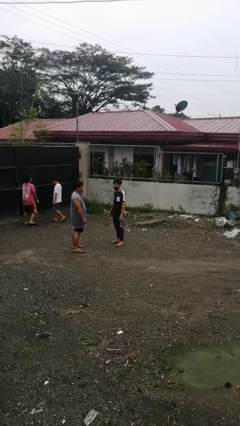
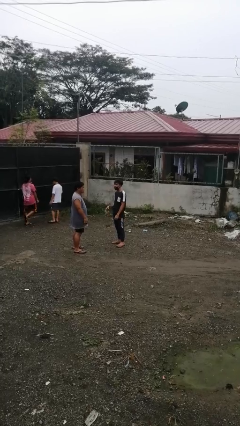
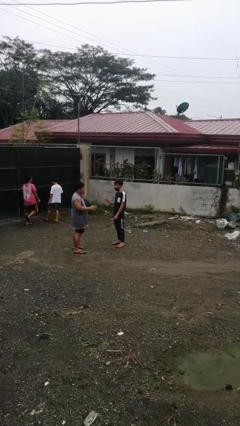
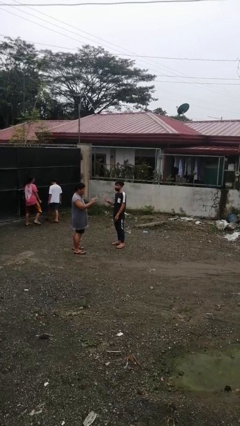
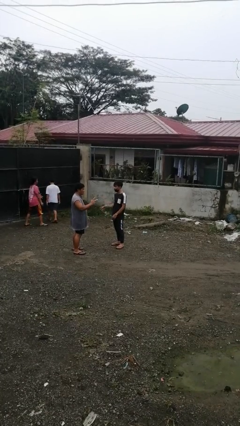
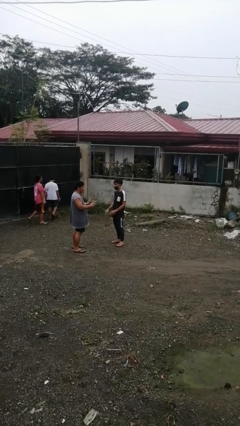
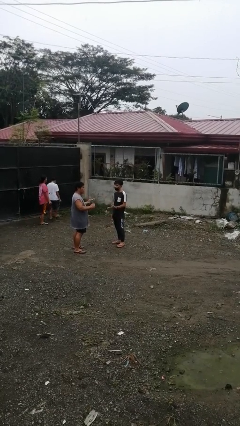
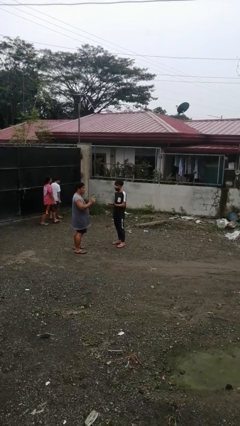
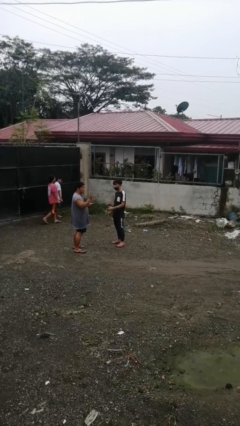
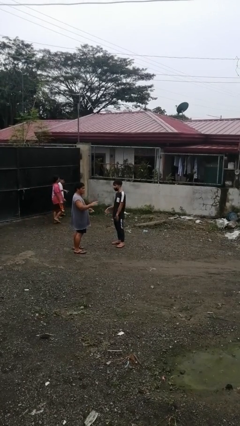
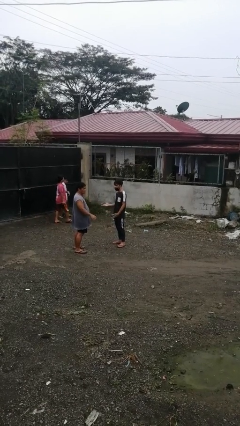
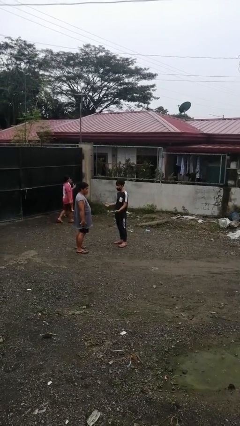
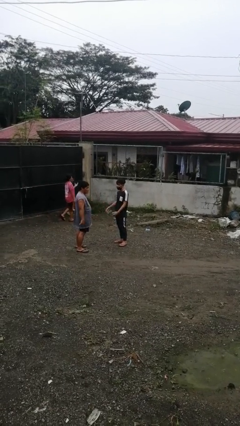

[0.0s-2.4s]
person talks to person

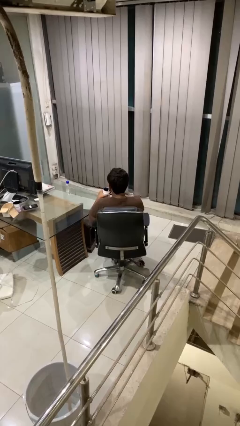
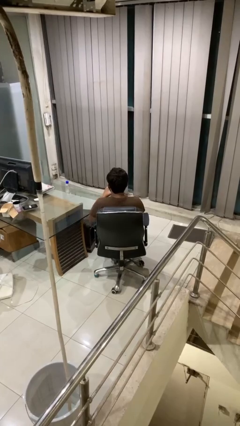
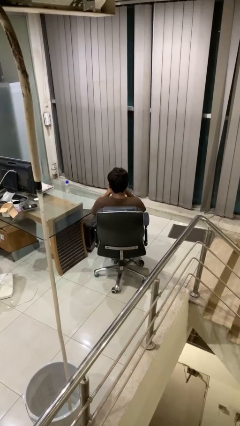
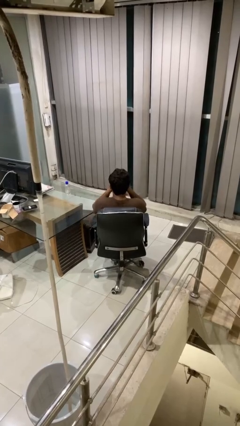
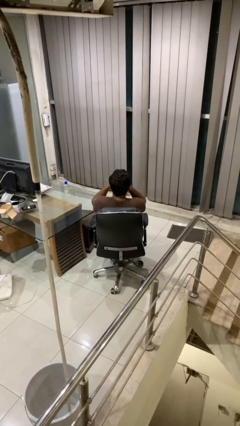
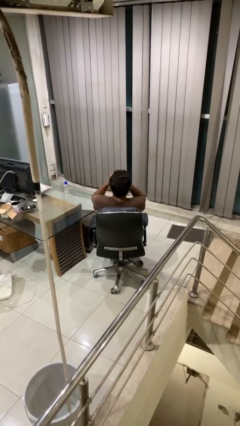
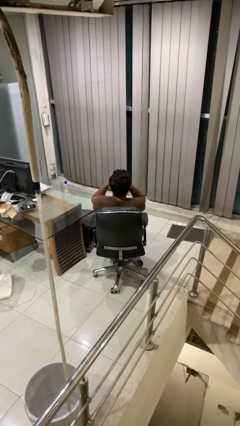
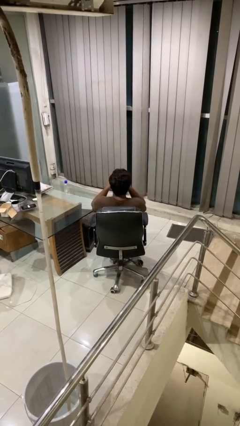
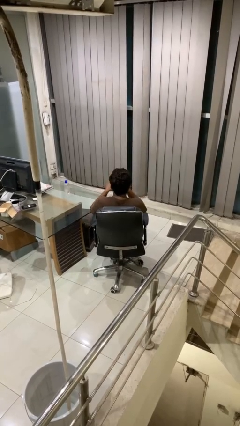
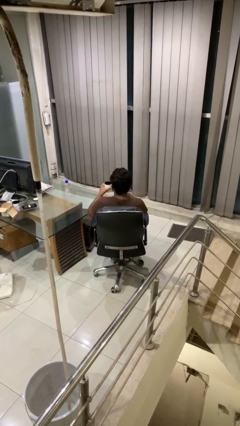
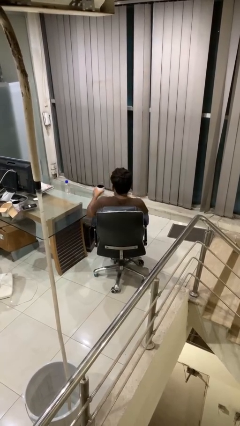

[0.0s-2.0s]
person drinks from mug

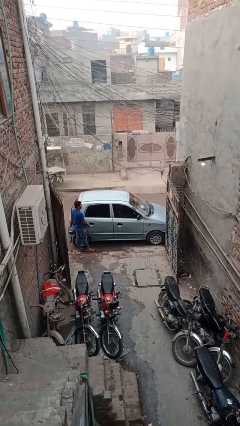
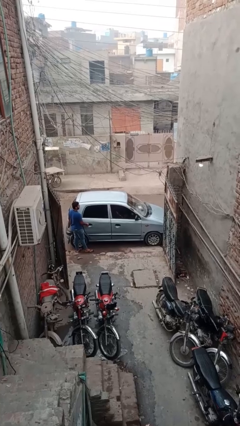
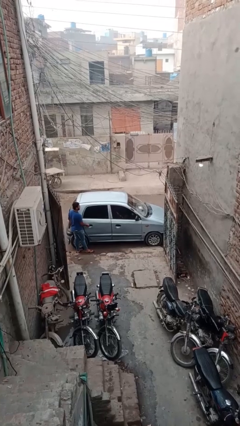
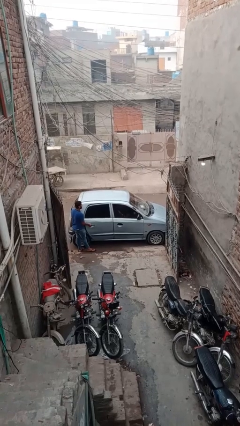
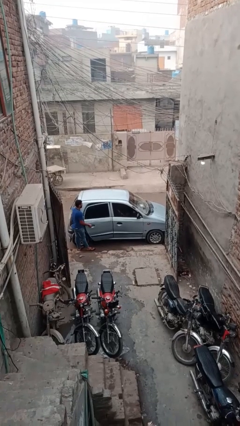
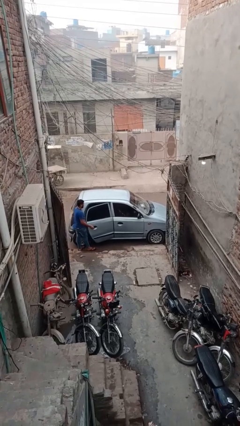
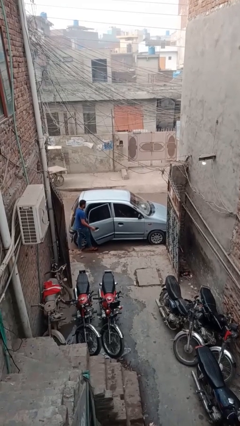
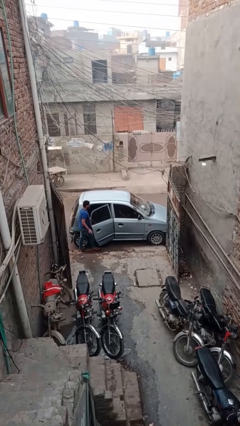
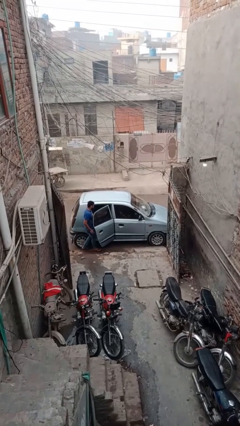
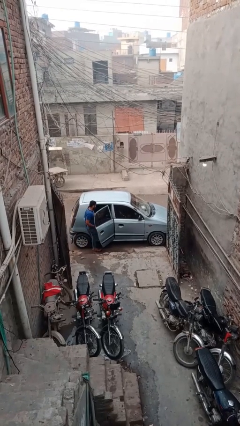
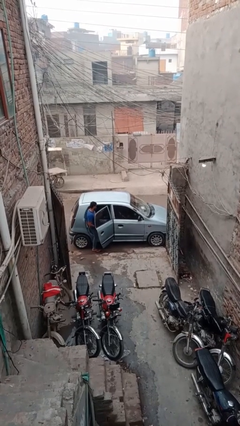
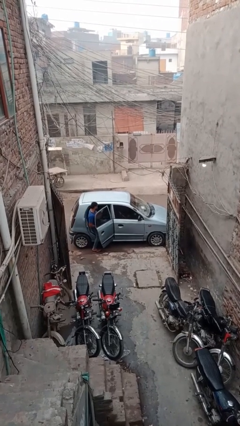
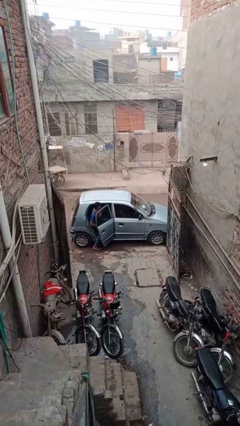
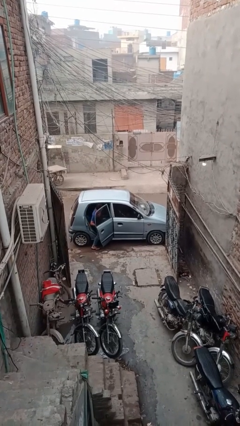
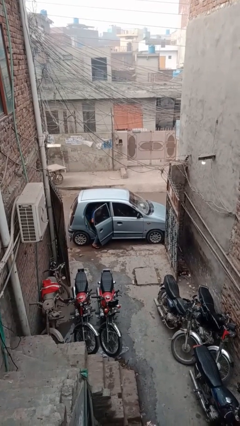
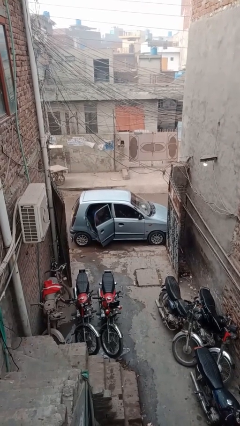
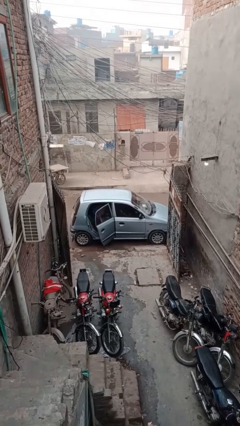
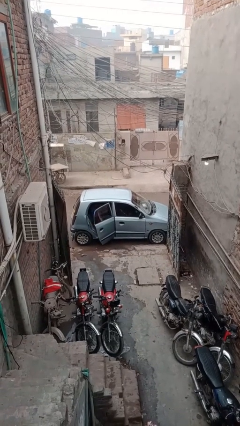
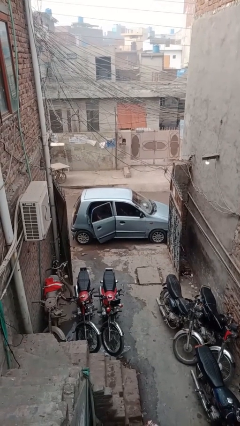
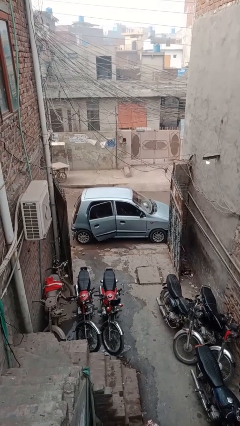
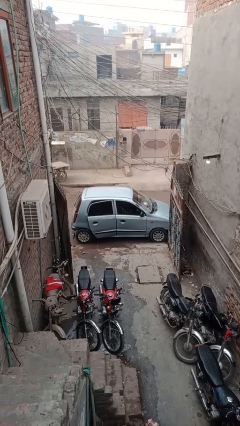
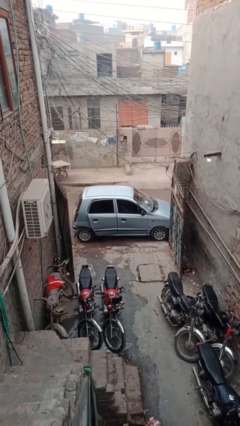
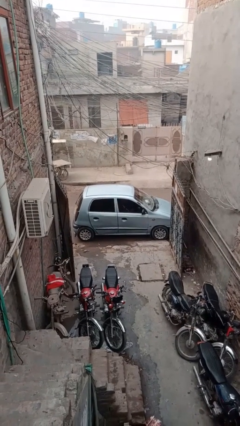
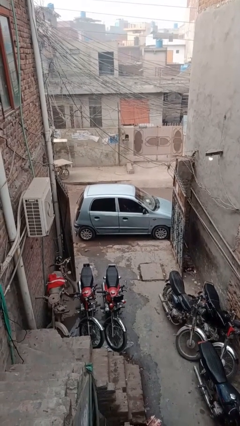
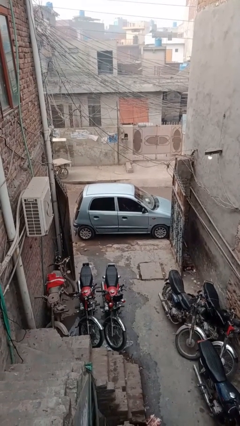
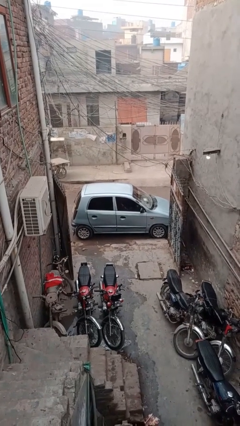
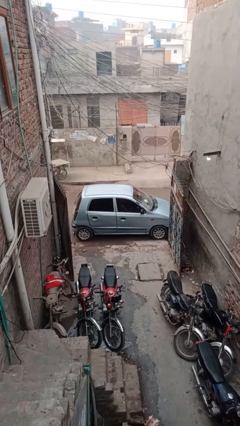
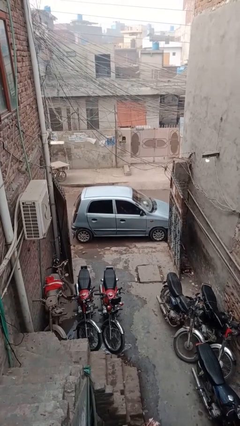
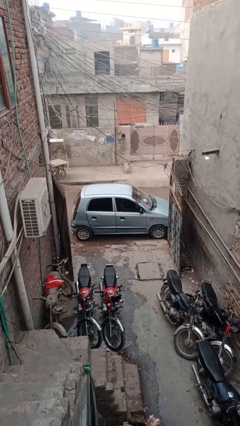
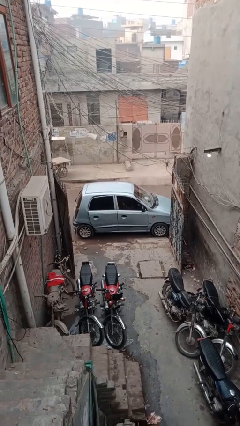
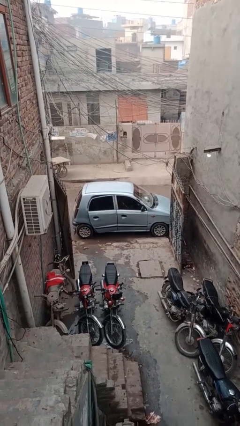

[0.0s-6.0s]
car picks up person

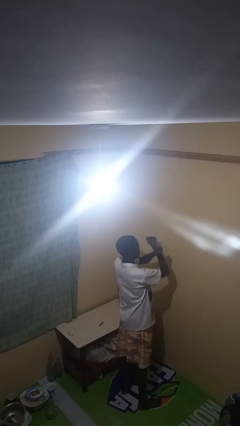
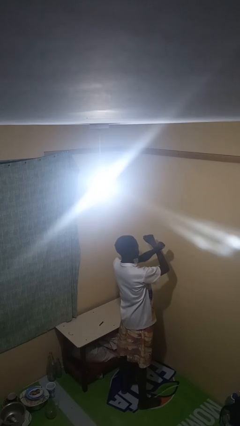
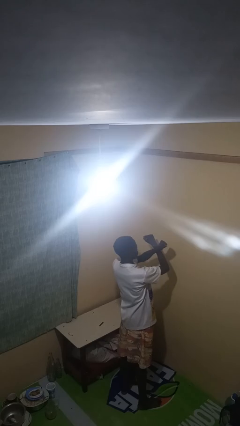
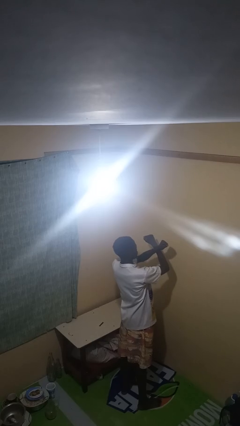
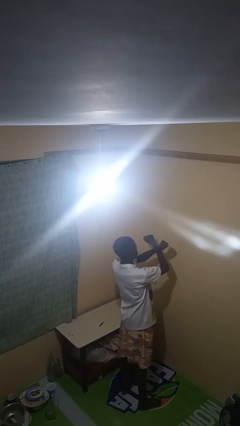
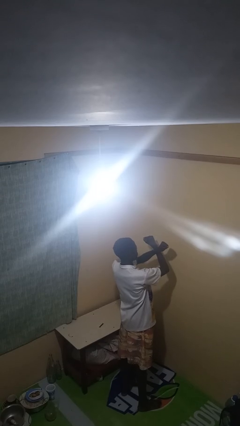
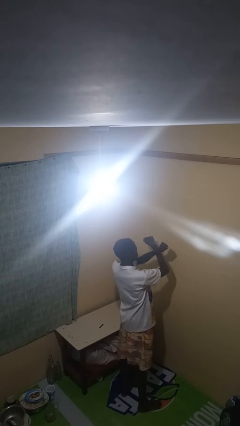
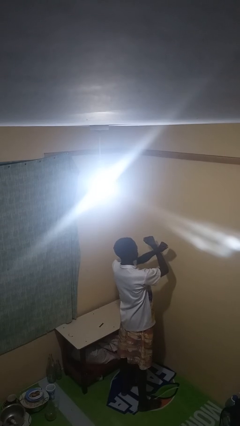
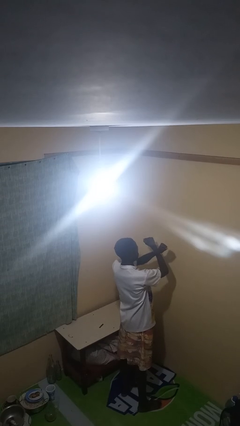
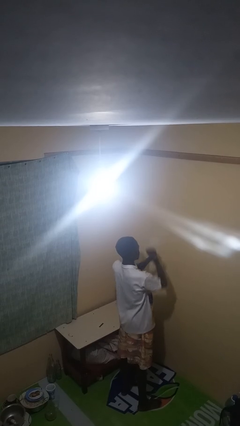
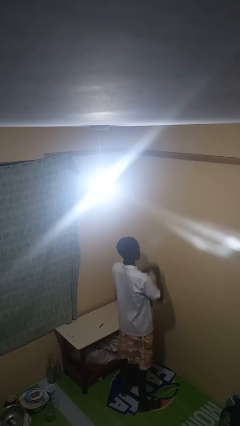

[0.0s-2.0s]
person gestures arms x

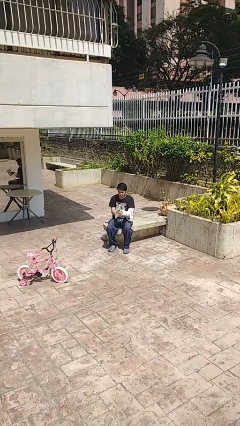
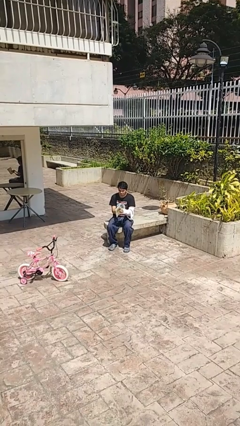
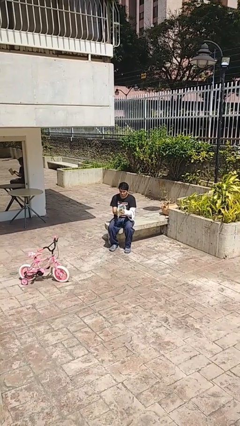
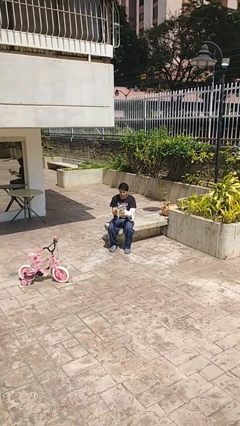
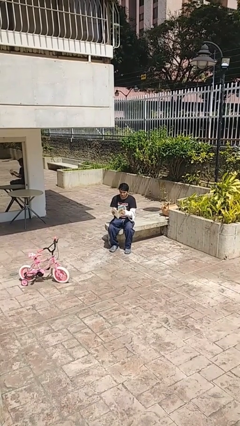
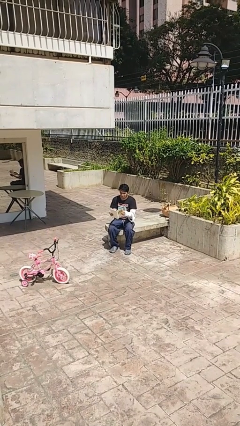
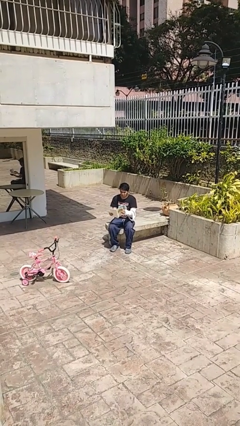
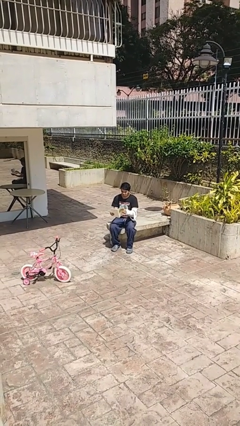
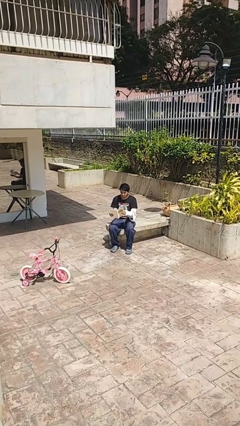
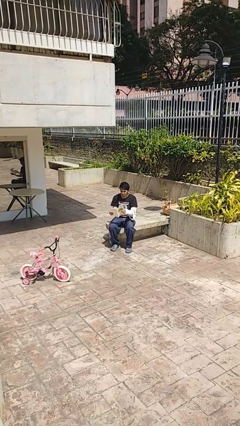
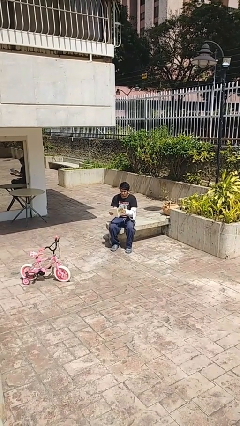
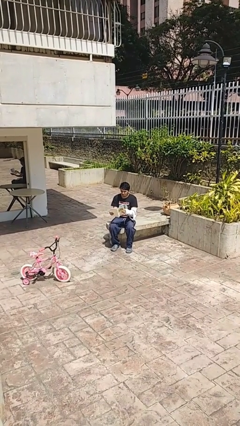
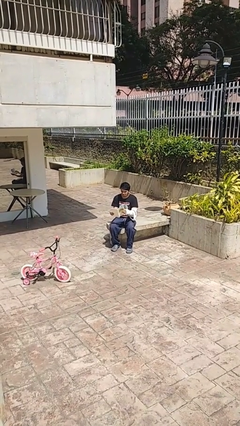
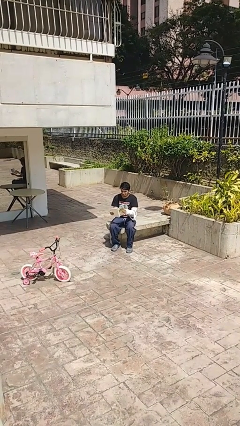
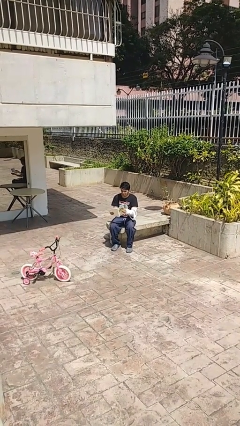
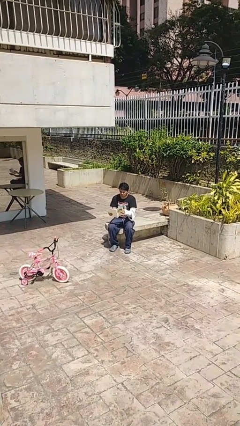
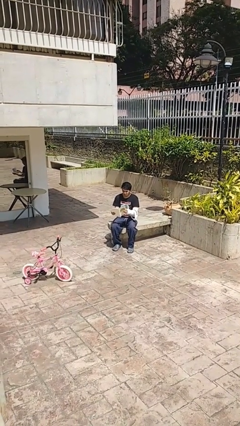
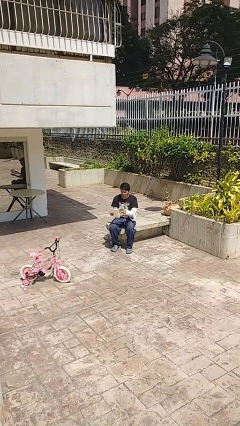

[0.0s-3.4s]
person reads document

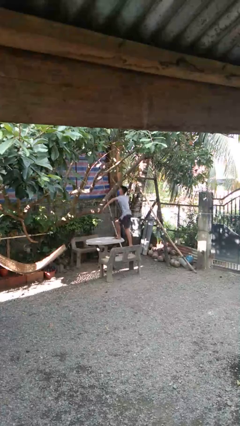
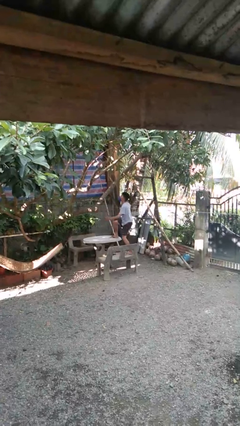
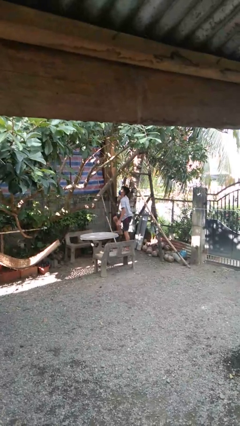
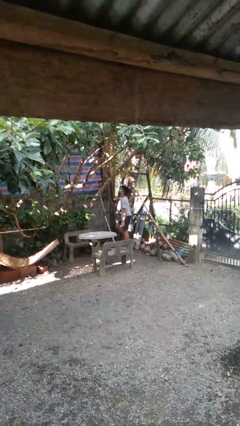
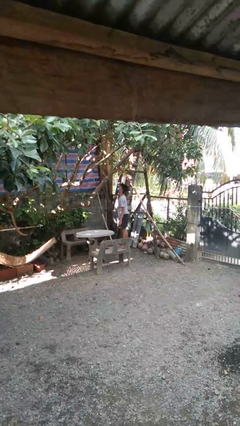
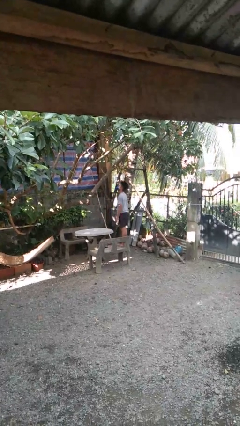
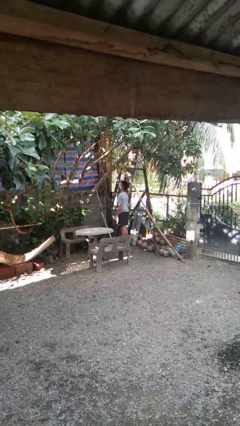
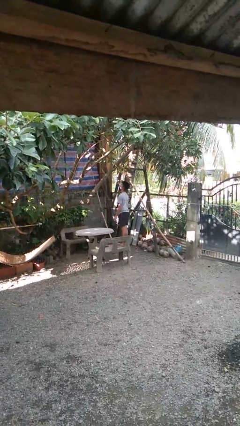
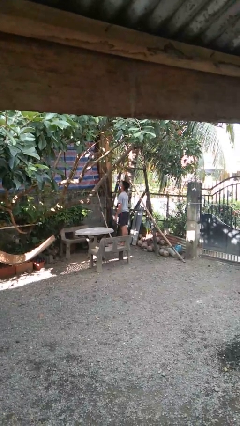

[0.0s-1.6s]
person climbs off table

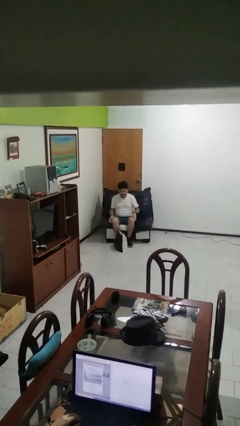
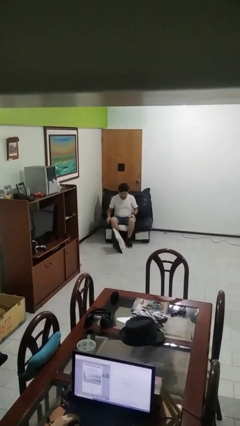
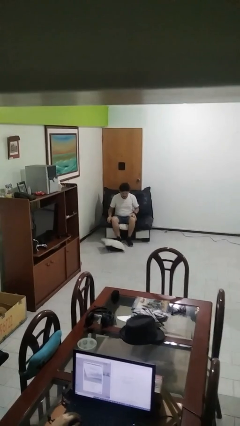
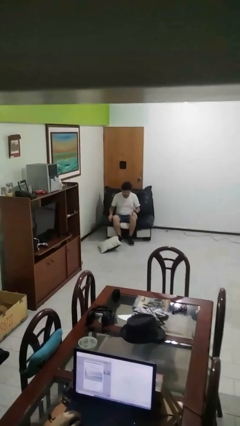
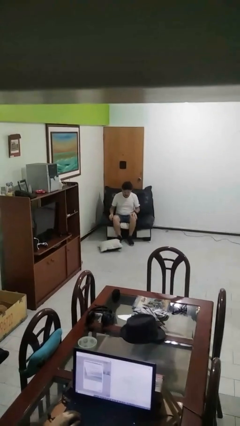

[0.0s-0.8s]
person drops object
